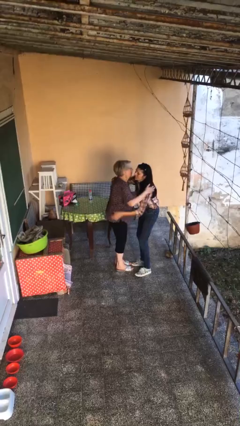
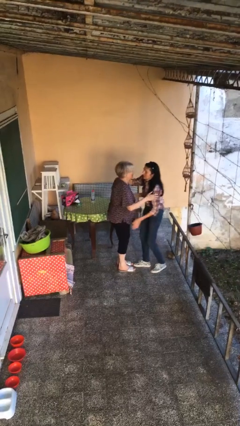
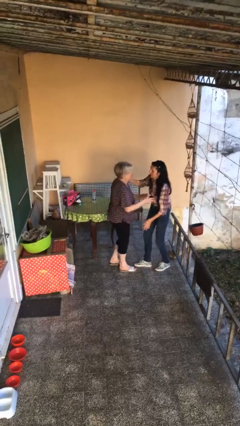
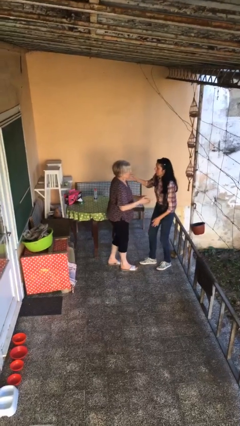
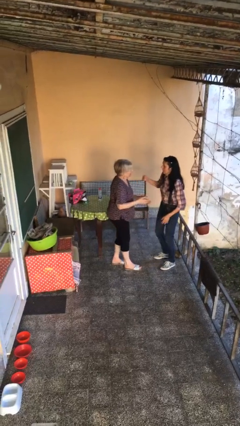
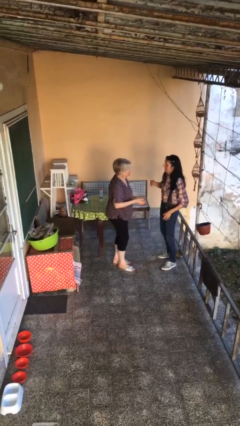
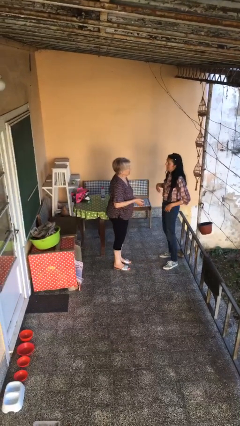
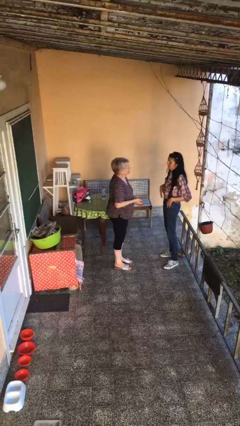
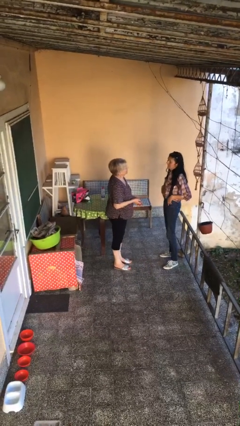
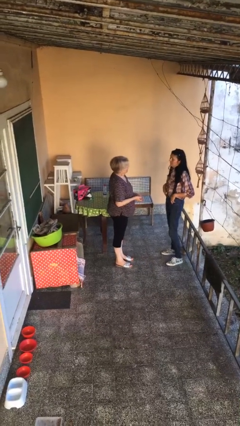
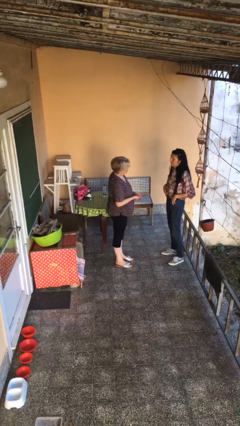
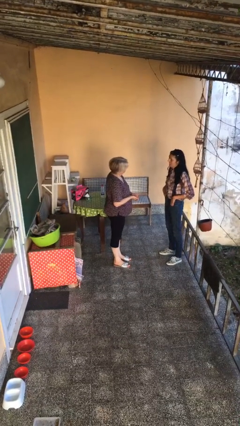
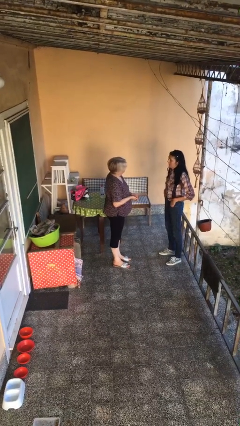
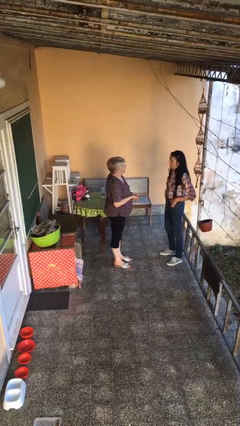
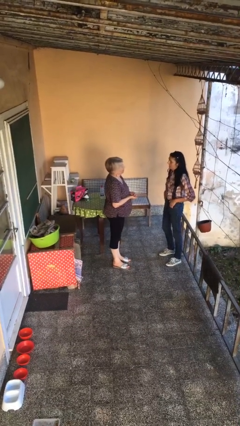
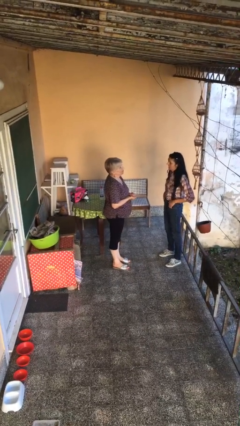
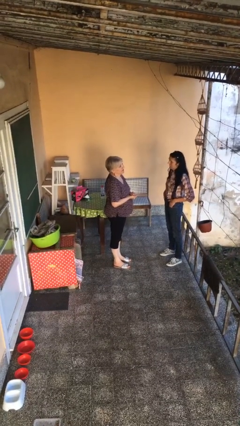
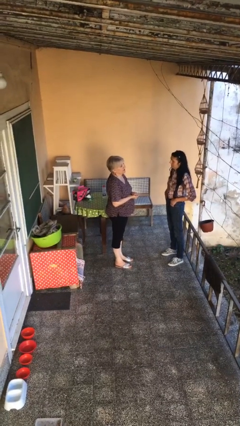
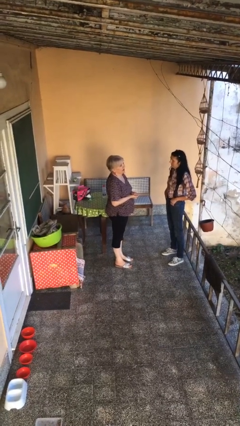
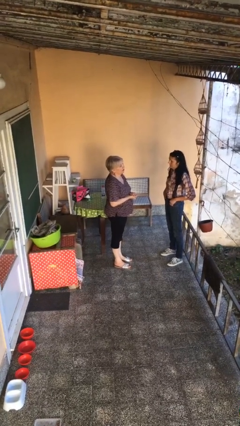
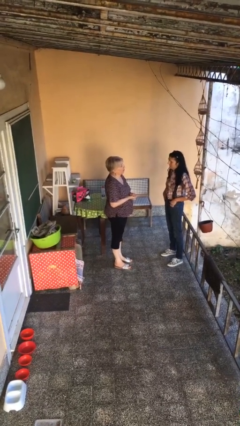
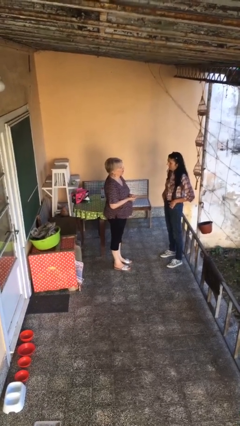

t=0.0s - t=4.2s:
person talks to person

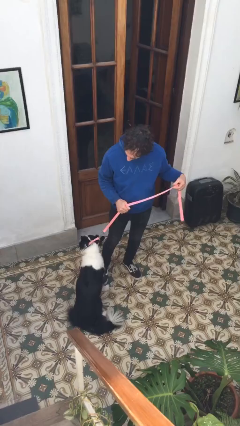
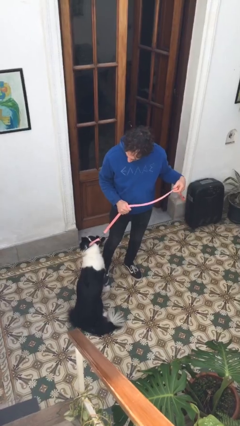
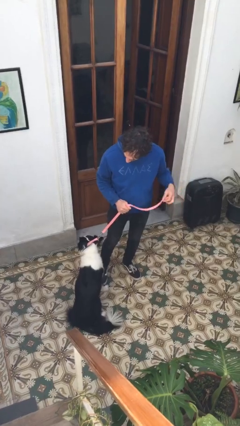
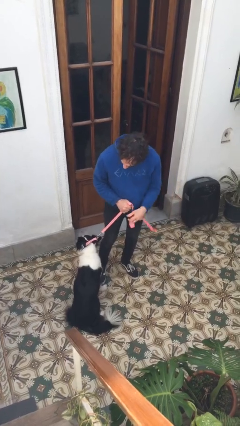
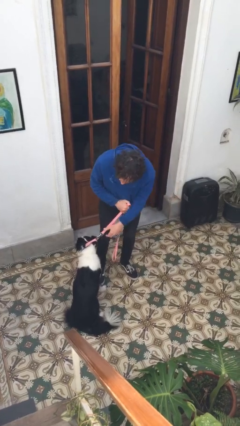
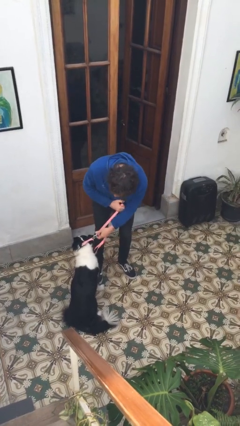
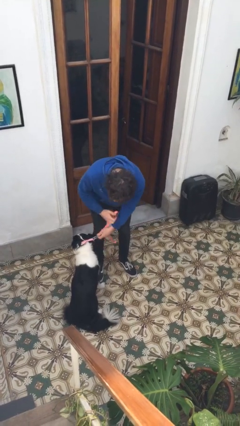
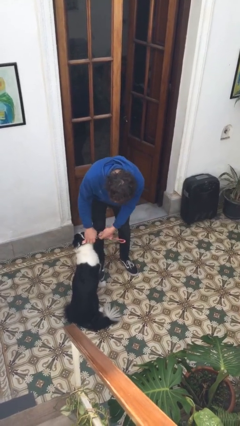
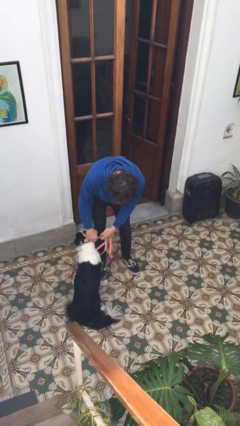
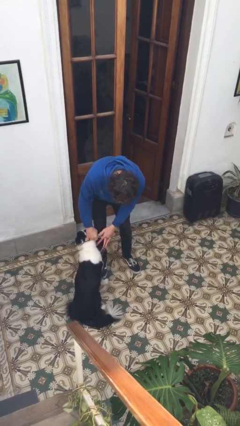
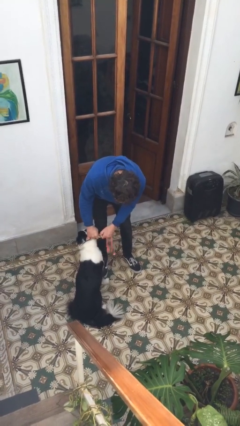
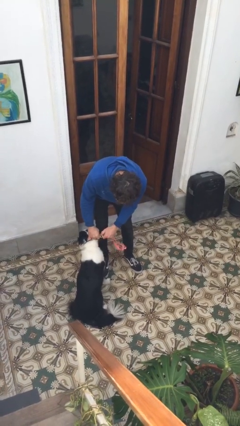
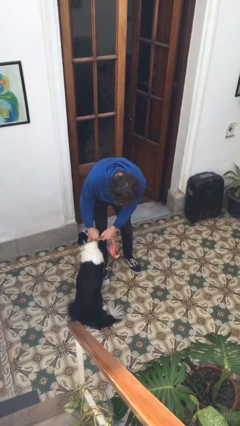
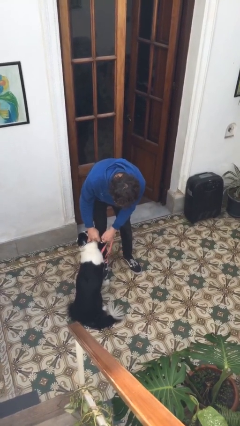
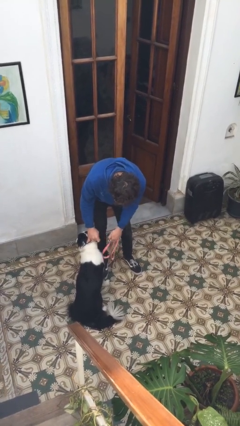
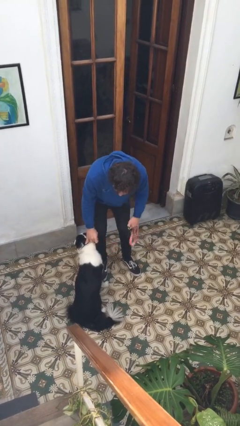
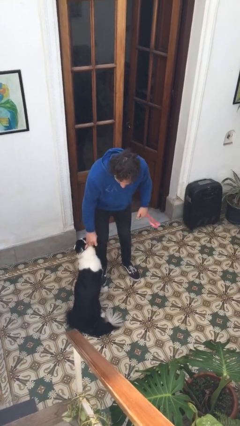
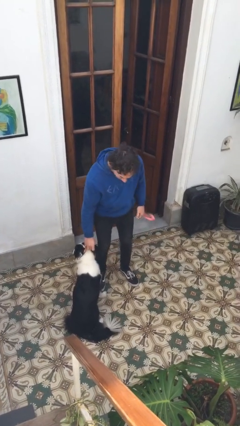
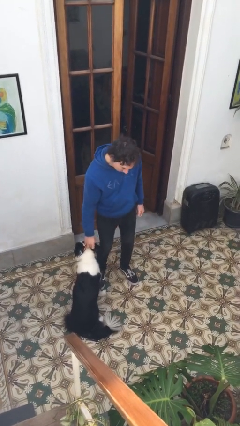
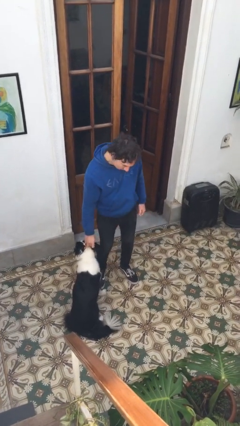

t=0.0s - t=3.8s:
person unattaches leash from dog

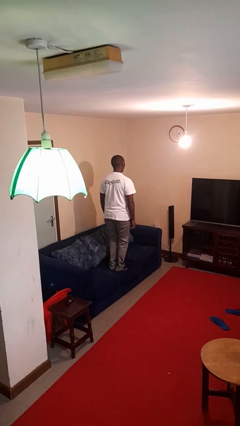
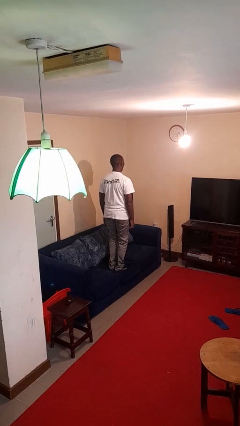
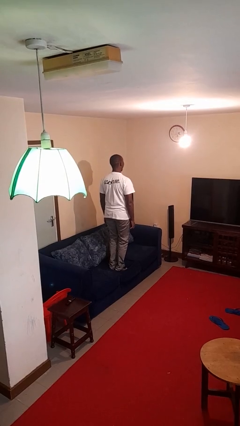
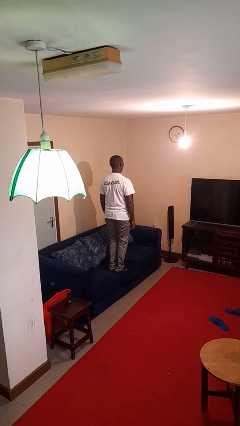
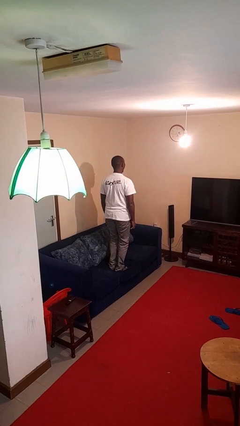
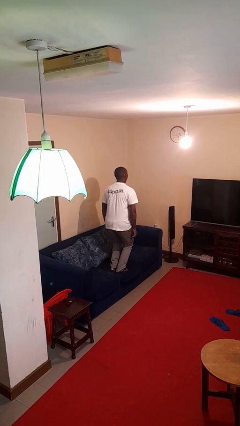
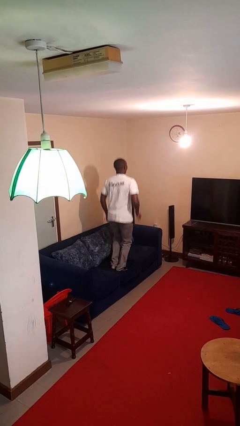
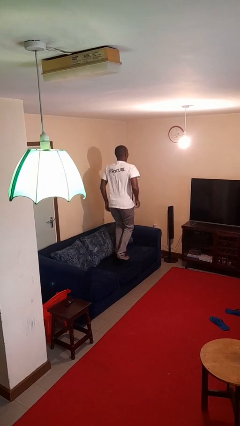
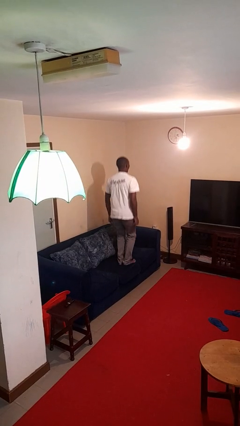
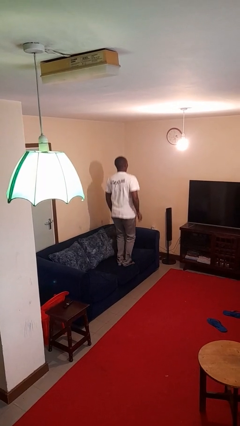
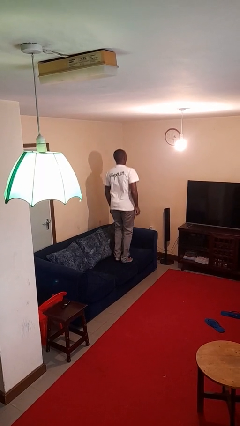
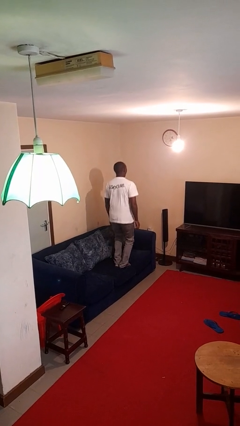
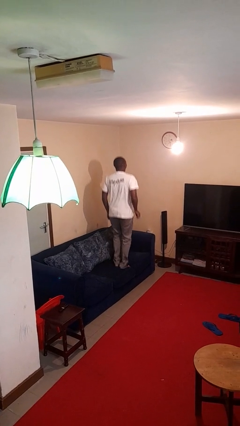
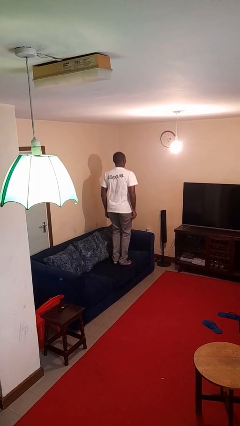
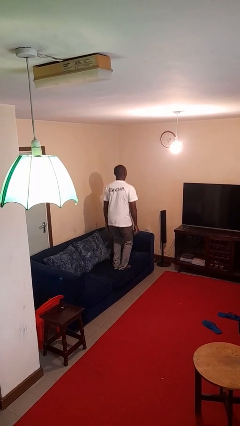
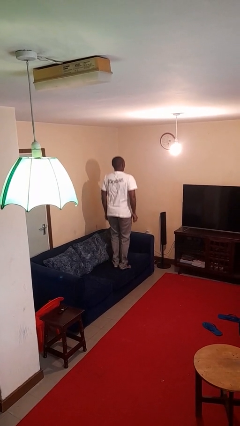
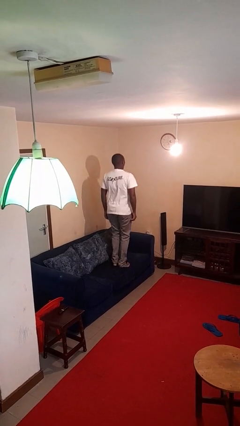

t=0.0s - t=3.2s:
person jumps on couch

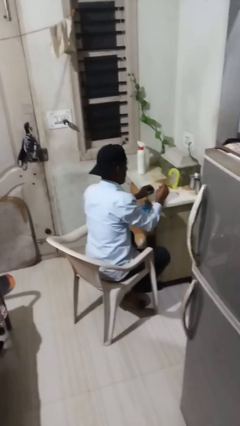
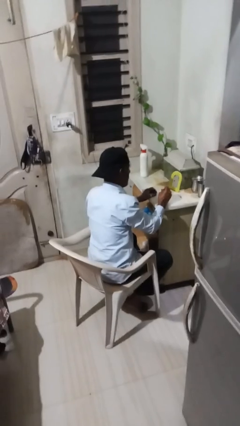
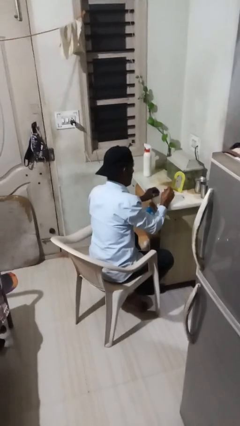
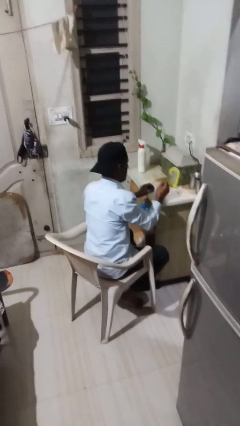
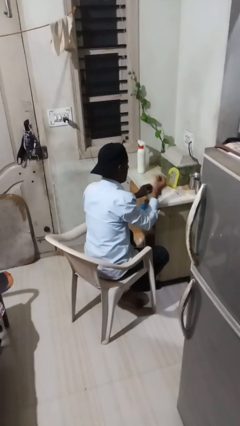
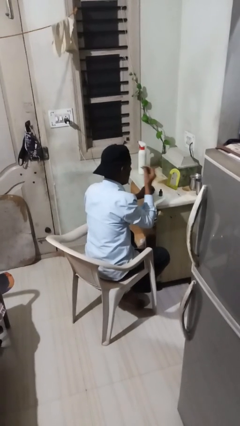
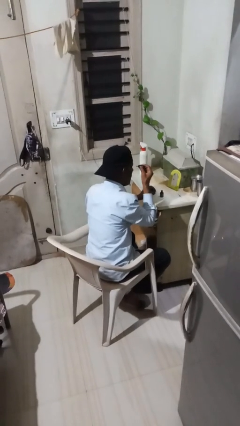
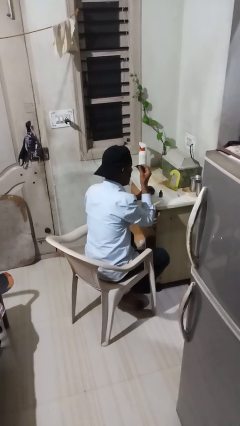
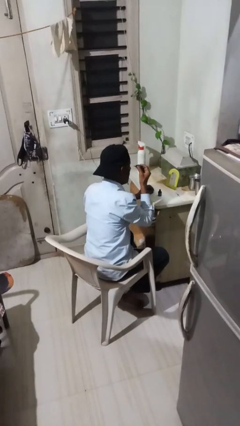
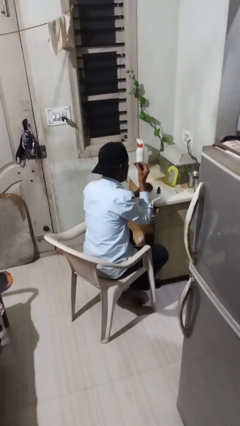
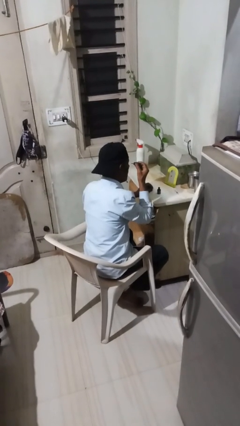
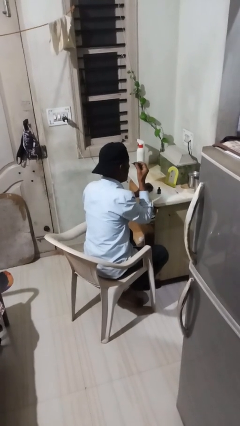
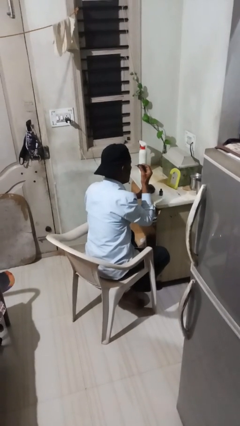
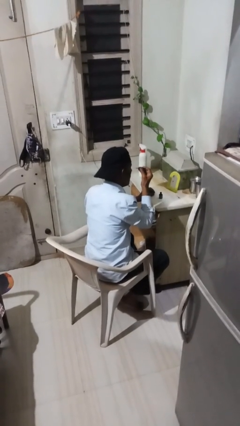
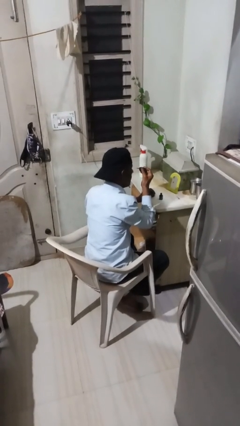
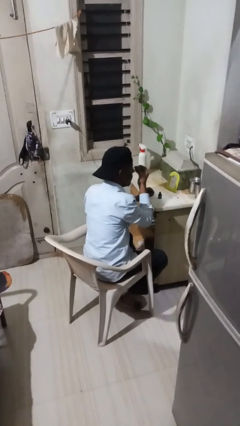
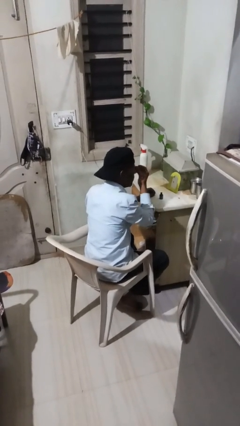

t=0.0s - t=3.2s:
person applies eye makeup

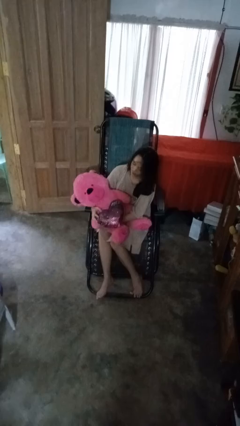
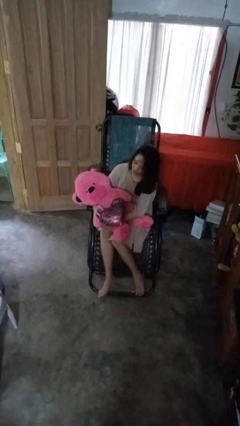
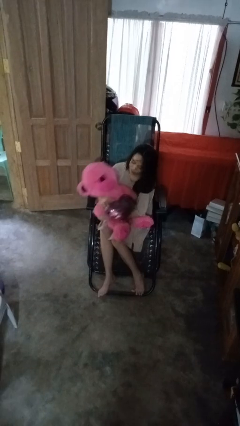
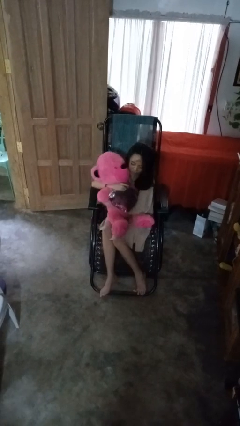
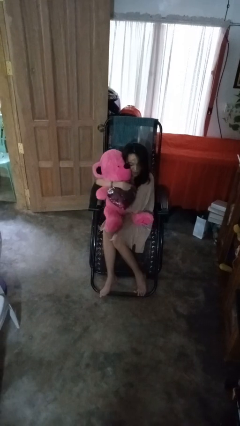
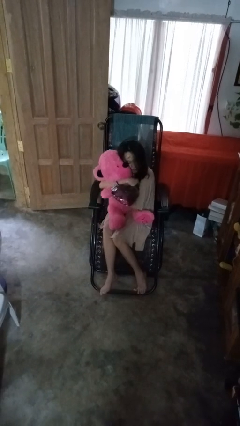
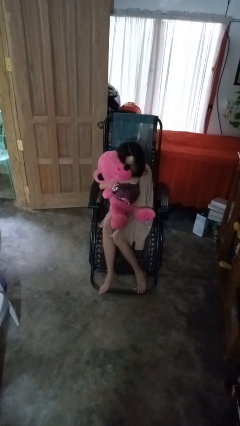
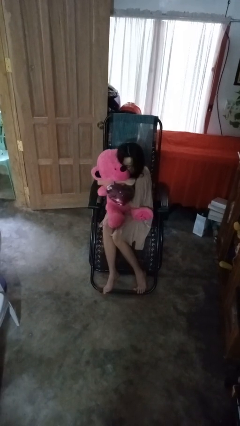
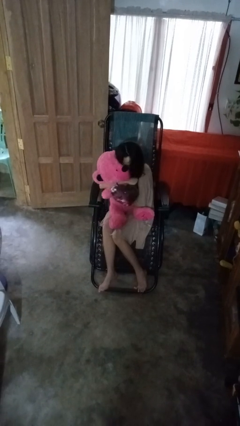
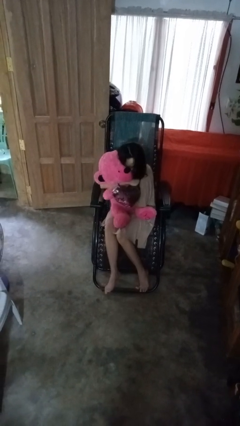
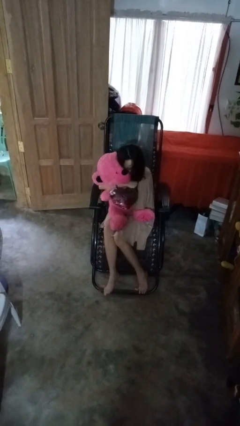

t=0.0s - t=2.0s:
person hugs stuffed animal

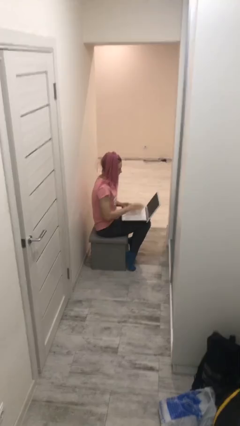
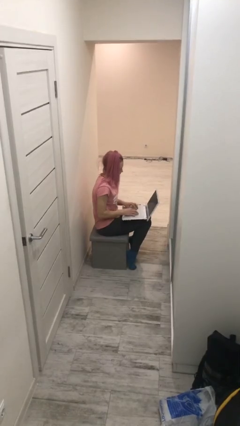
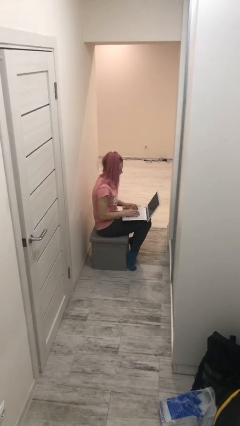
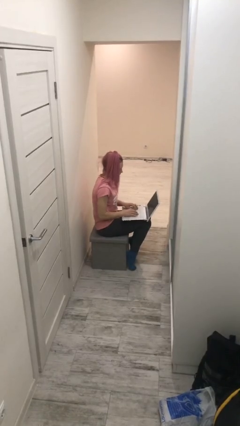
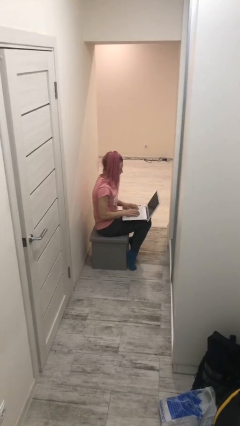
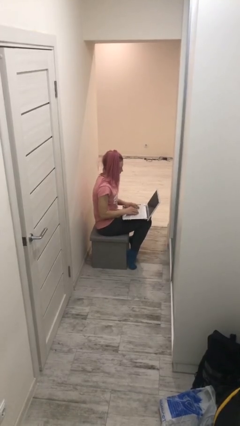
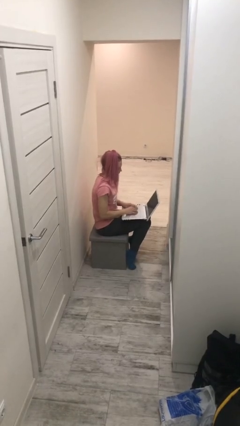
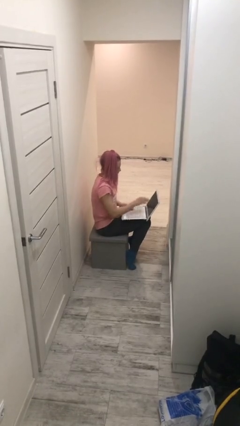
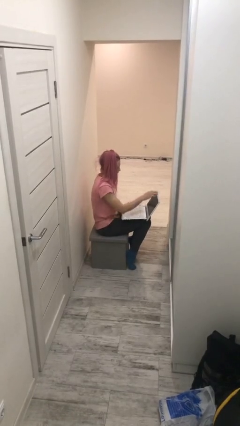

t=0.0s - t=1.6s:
person interacts with laptop
